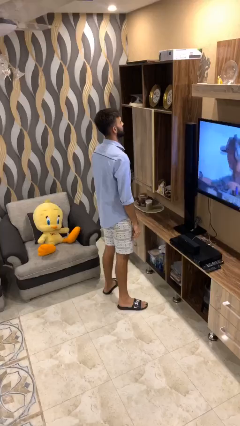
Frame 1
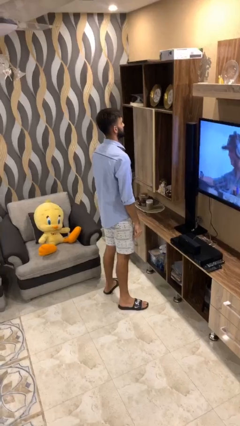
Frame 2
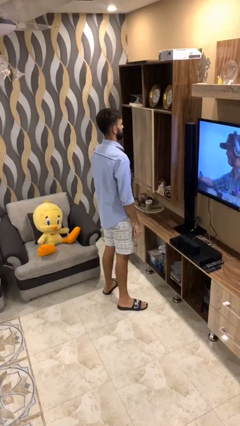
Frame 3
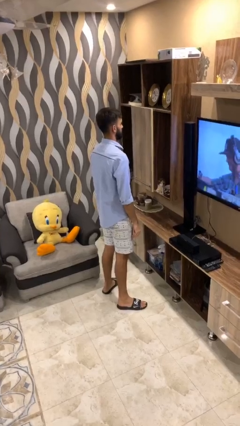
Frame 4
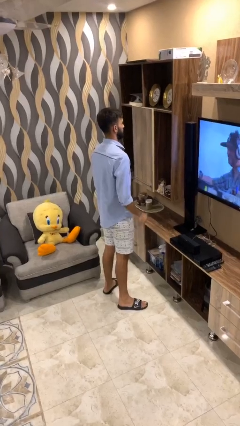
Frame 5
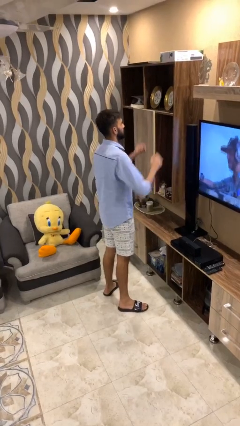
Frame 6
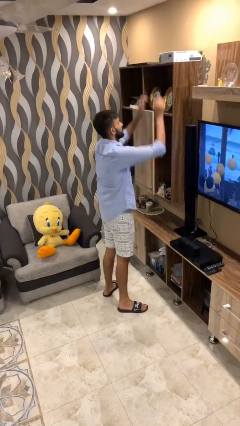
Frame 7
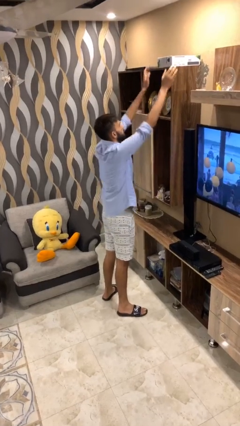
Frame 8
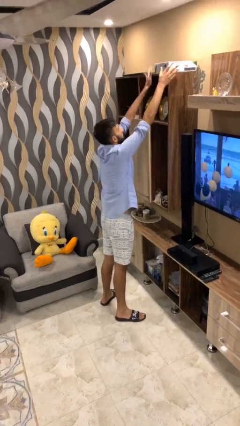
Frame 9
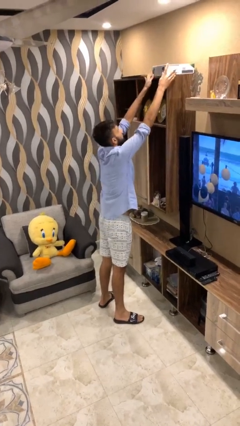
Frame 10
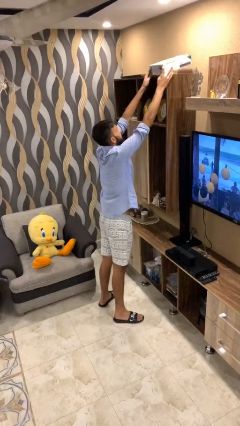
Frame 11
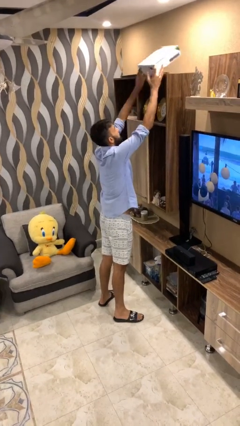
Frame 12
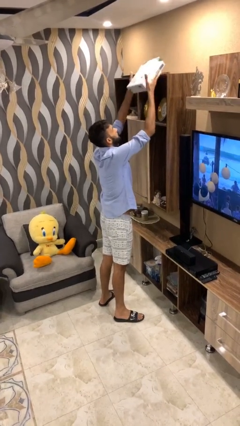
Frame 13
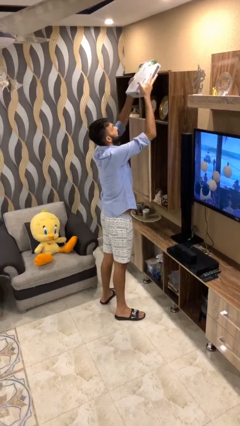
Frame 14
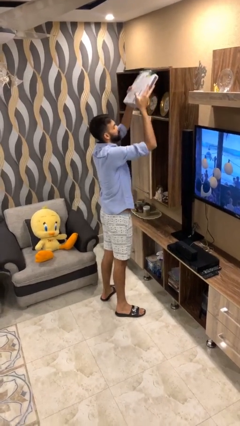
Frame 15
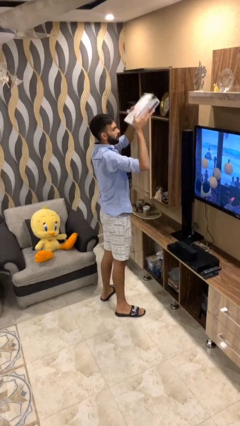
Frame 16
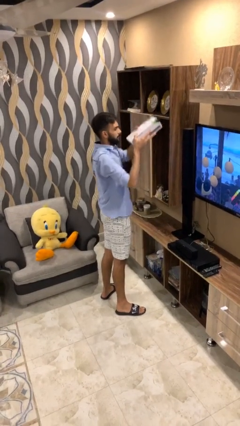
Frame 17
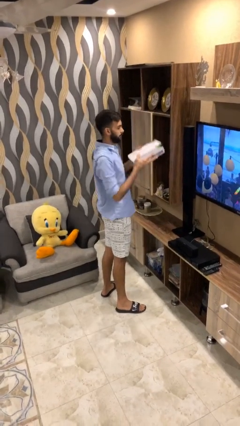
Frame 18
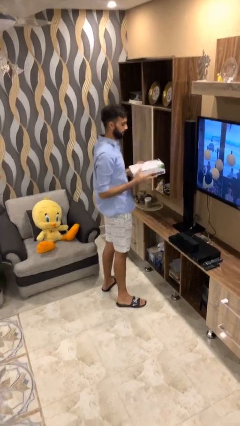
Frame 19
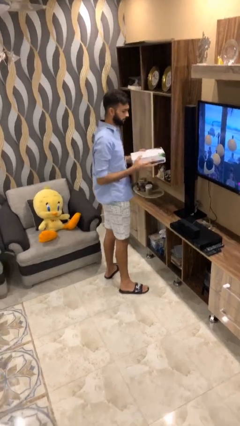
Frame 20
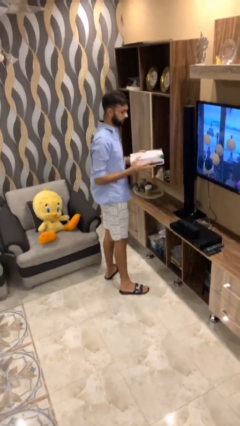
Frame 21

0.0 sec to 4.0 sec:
person picks up object from shelf

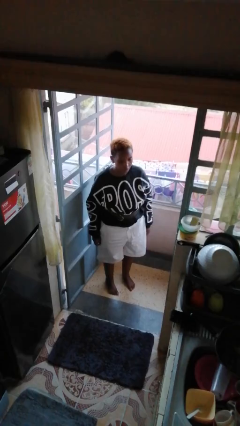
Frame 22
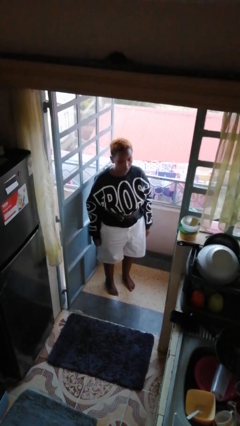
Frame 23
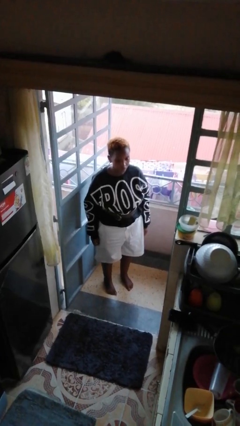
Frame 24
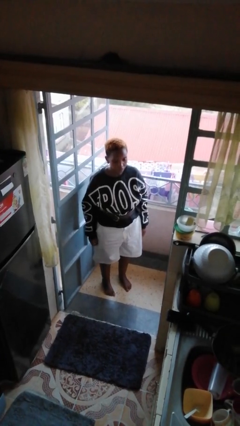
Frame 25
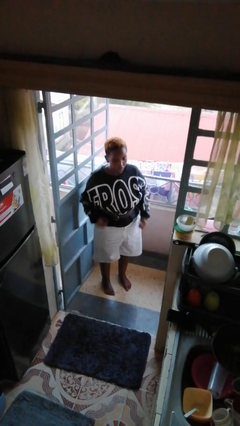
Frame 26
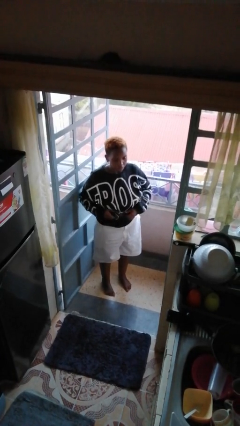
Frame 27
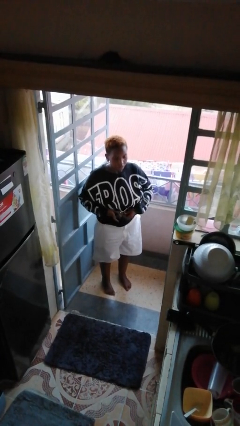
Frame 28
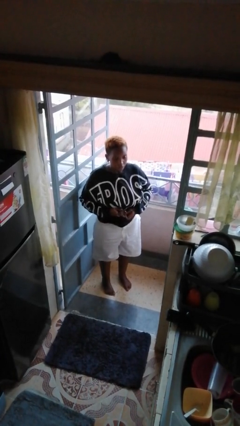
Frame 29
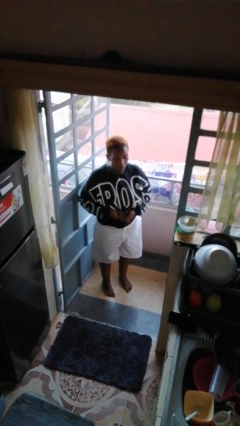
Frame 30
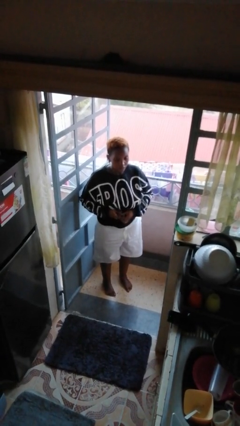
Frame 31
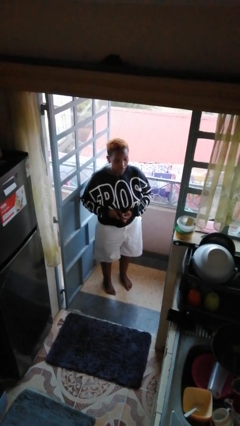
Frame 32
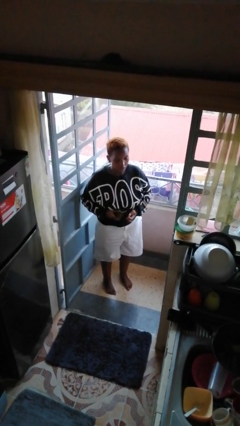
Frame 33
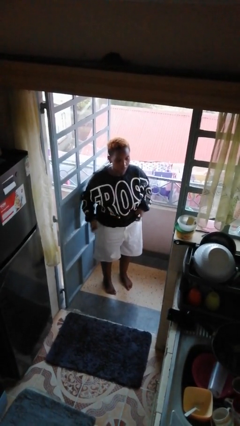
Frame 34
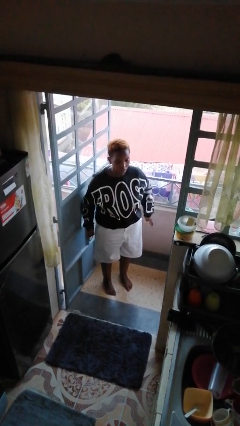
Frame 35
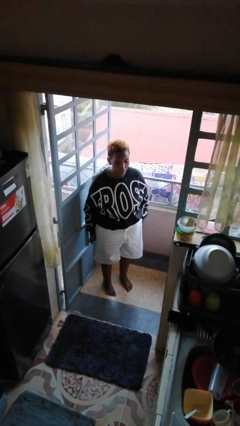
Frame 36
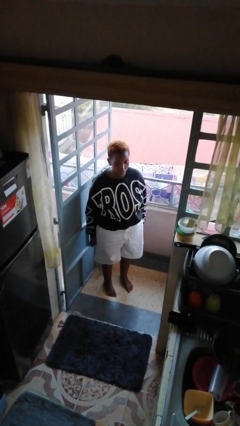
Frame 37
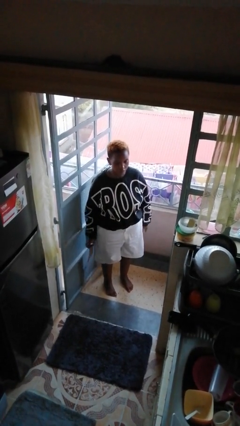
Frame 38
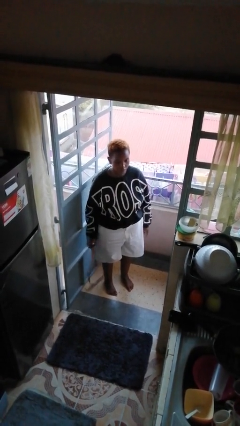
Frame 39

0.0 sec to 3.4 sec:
person takes off belt

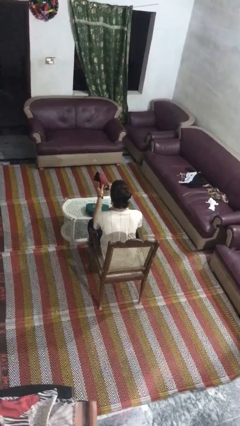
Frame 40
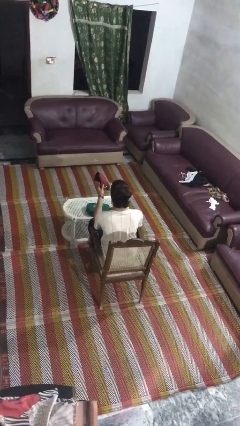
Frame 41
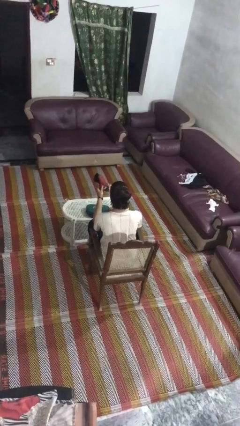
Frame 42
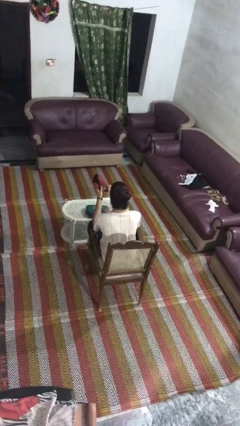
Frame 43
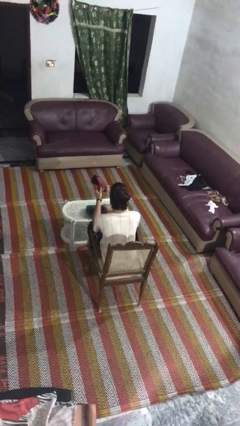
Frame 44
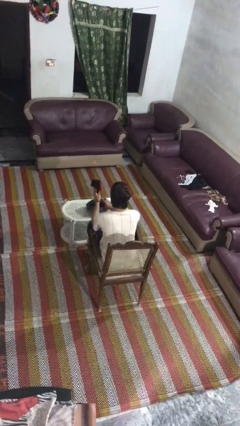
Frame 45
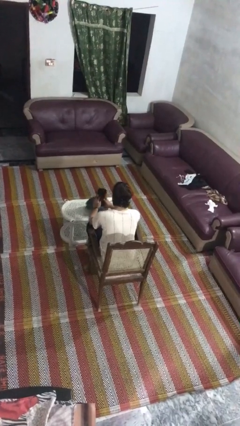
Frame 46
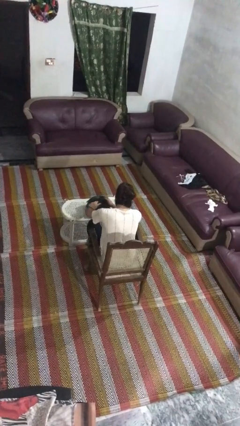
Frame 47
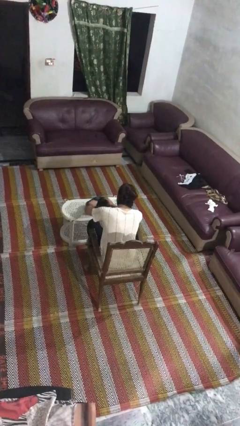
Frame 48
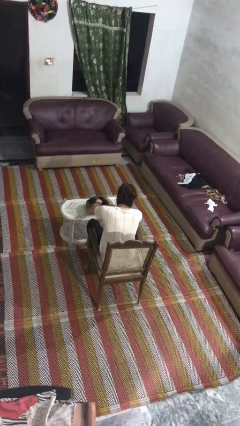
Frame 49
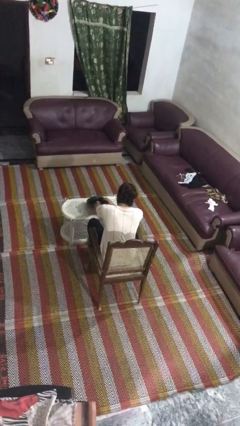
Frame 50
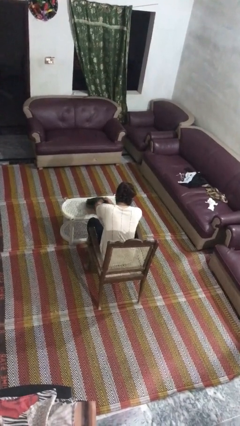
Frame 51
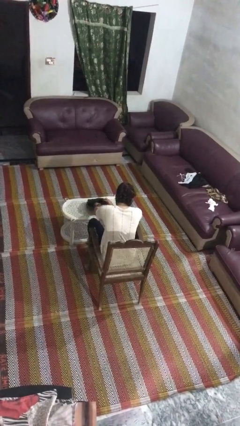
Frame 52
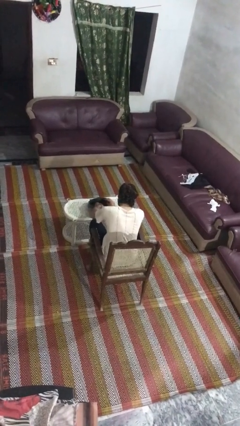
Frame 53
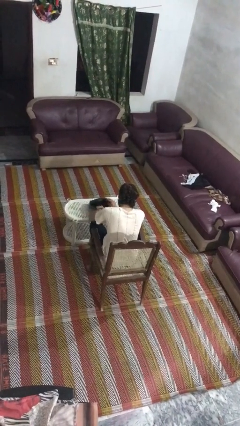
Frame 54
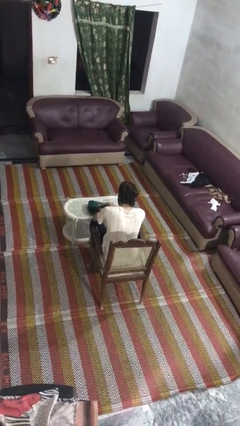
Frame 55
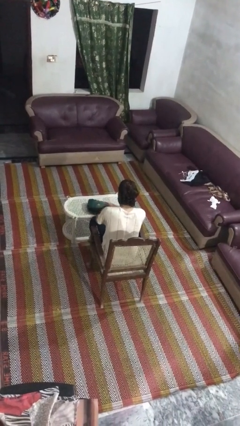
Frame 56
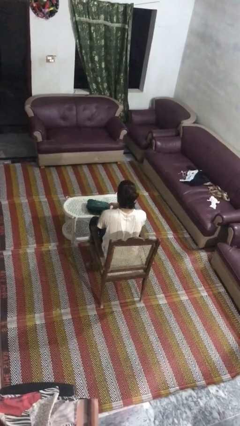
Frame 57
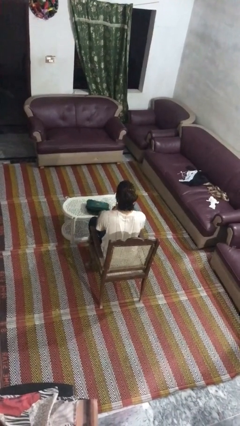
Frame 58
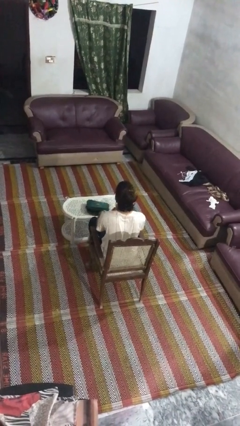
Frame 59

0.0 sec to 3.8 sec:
person puts object into purse

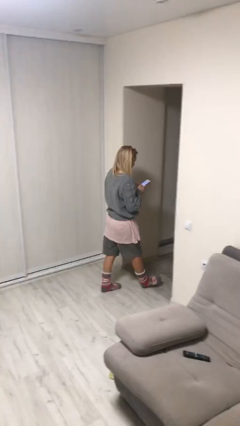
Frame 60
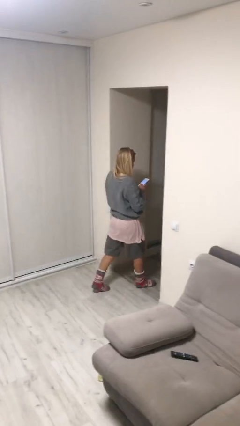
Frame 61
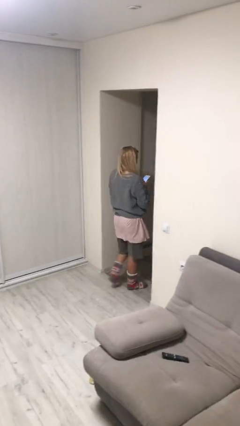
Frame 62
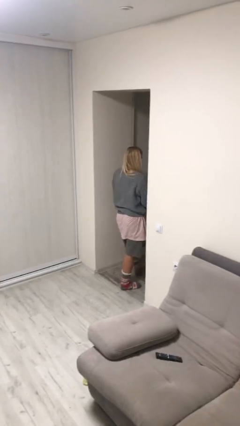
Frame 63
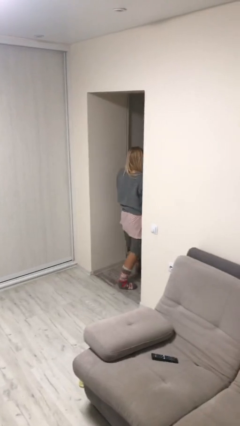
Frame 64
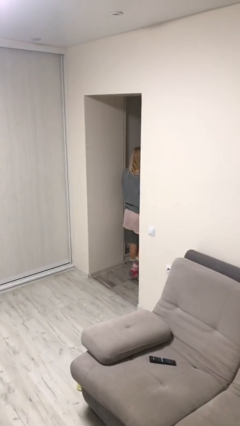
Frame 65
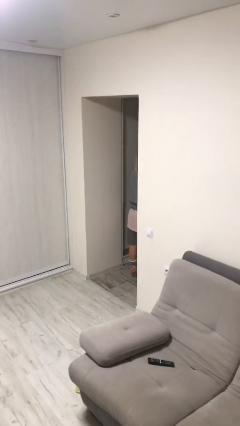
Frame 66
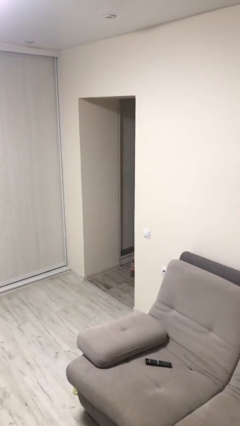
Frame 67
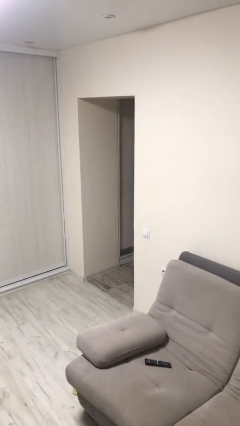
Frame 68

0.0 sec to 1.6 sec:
person exits scene through structure

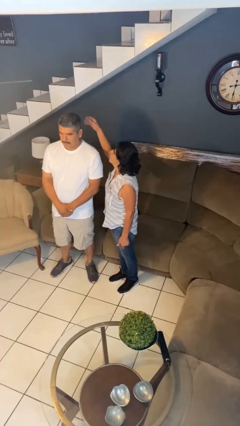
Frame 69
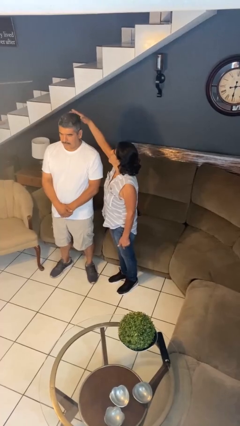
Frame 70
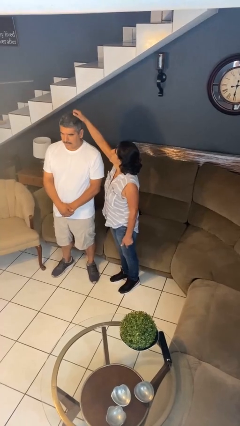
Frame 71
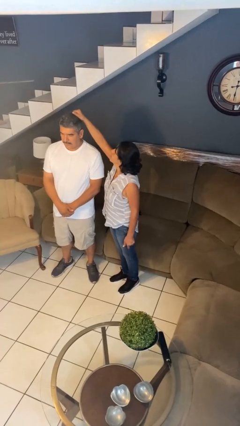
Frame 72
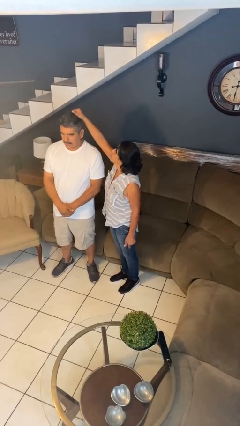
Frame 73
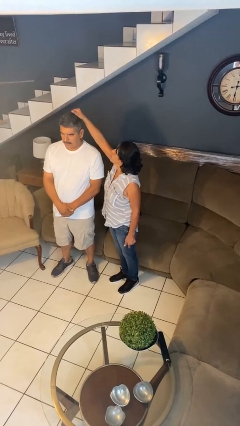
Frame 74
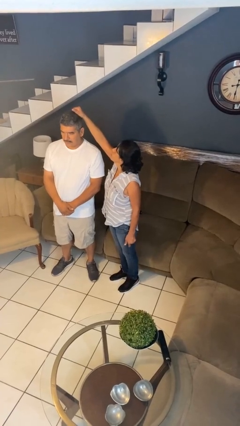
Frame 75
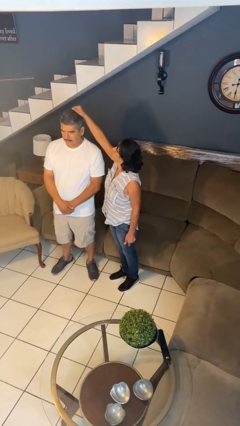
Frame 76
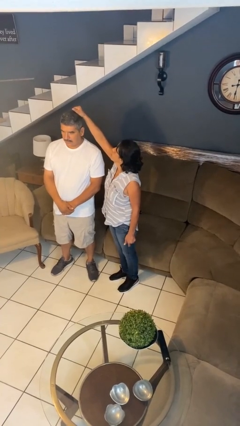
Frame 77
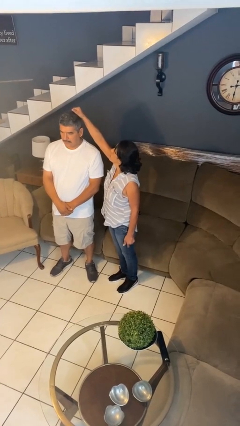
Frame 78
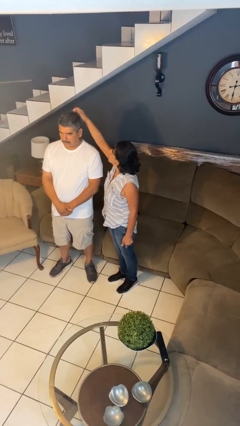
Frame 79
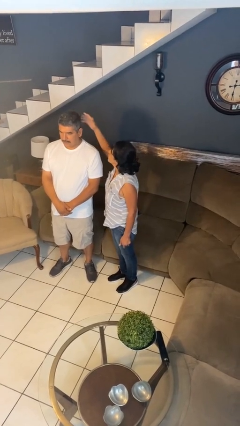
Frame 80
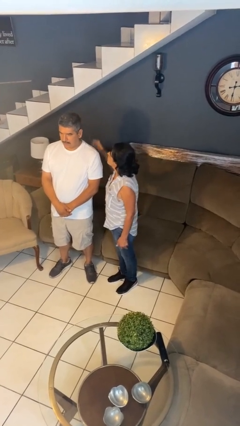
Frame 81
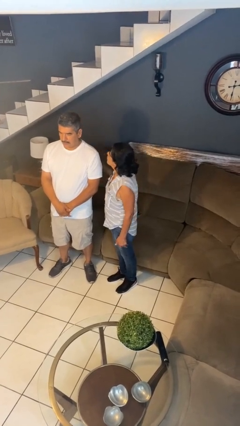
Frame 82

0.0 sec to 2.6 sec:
person grabs person by hair

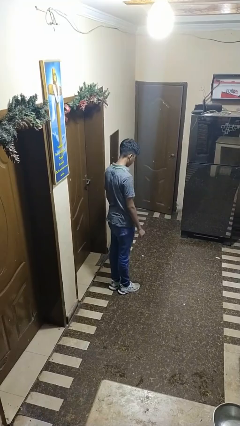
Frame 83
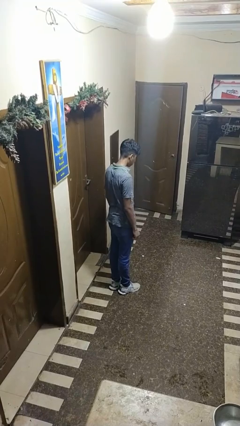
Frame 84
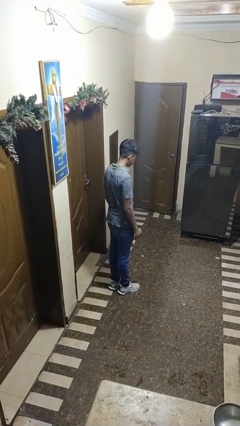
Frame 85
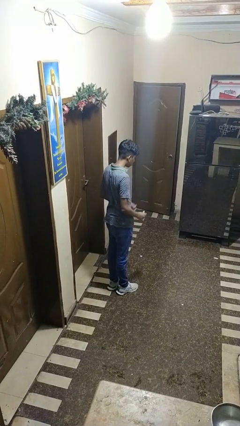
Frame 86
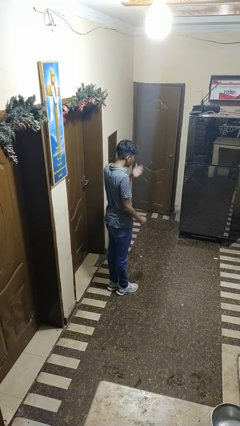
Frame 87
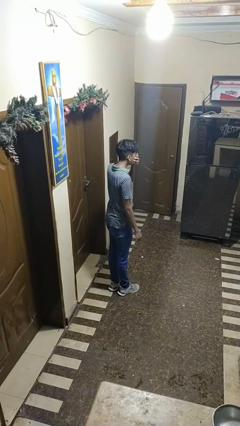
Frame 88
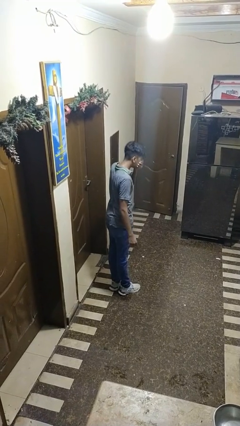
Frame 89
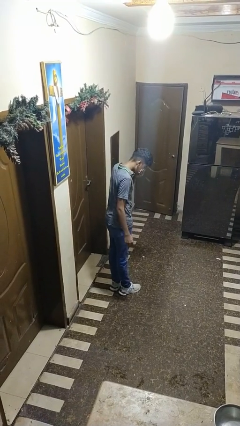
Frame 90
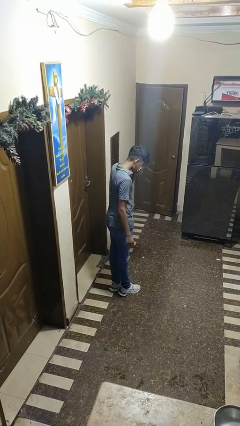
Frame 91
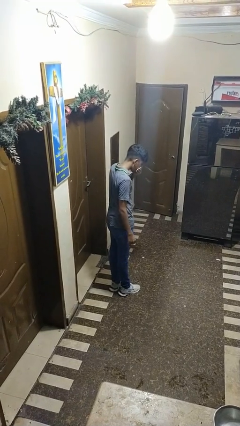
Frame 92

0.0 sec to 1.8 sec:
person sneezes into hand
